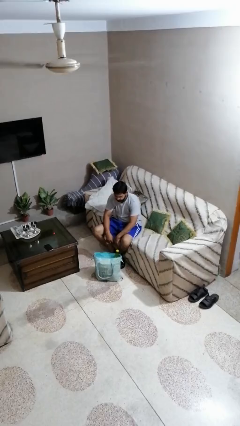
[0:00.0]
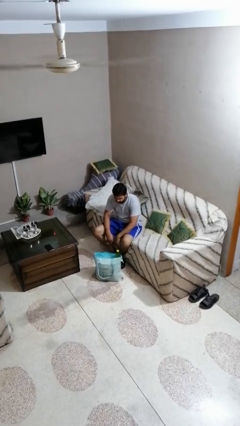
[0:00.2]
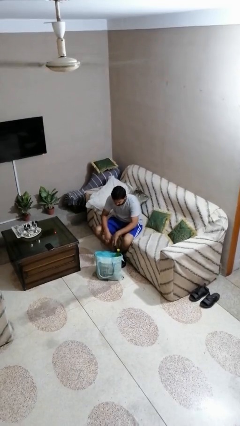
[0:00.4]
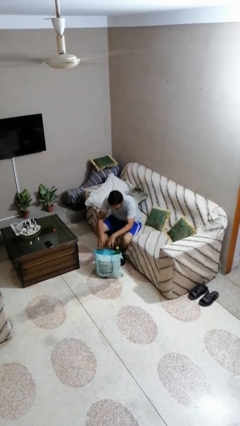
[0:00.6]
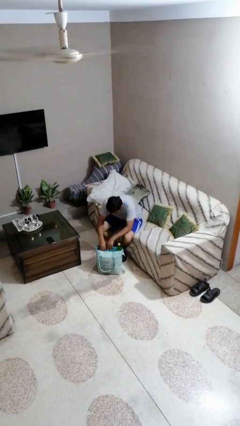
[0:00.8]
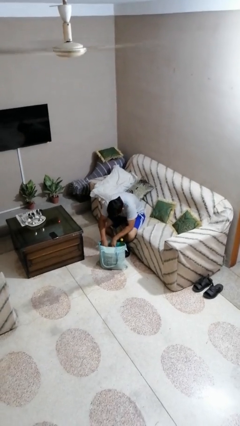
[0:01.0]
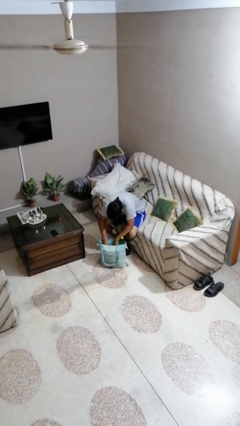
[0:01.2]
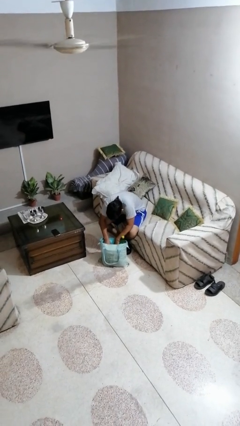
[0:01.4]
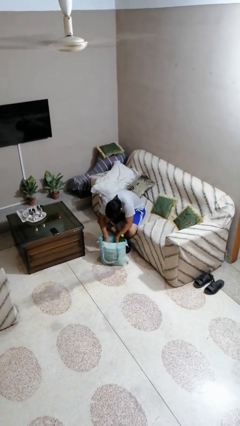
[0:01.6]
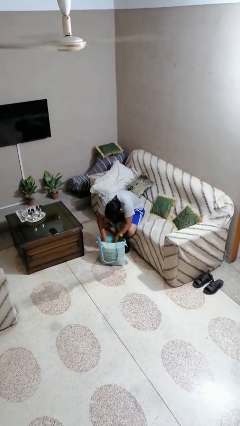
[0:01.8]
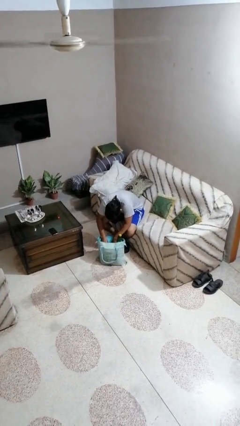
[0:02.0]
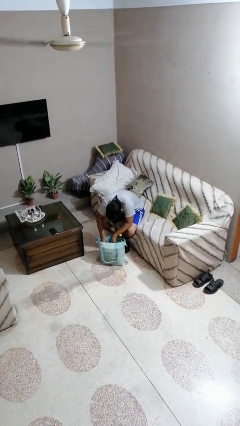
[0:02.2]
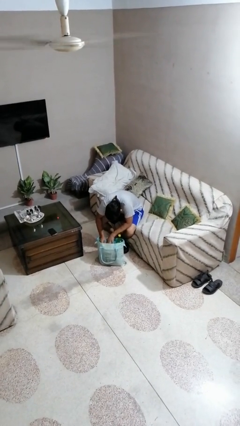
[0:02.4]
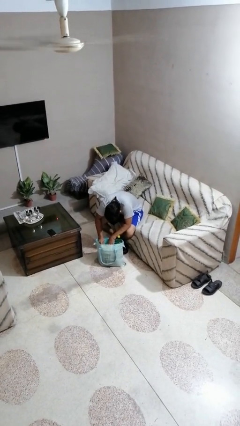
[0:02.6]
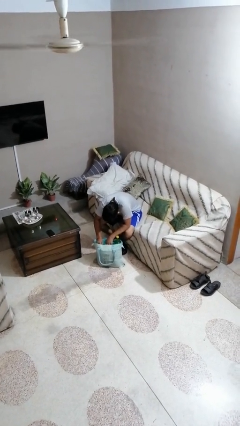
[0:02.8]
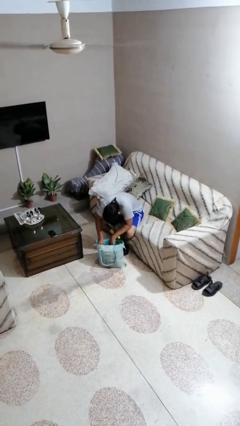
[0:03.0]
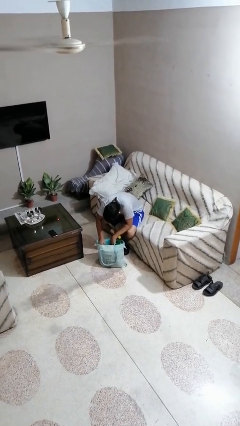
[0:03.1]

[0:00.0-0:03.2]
person searches in bag

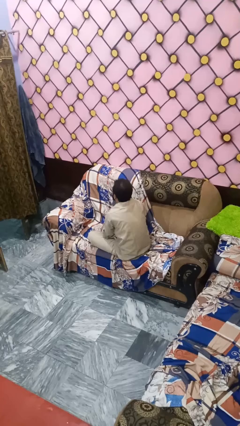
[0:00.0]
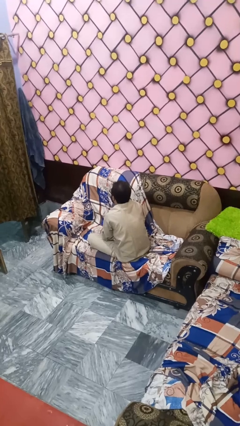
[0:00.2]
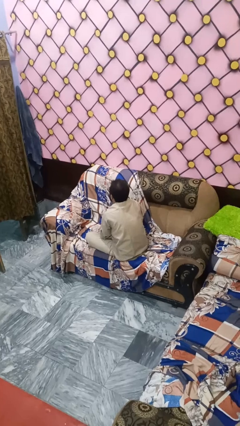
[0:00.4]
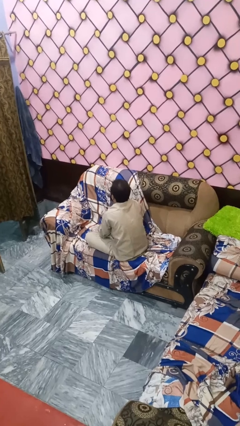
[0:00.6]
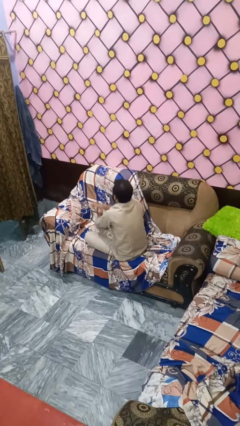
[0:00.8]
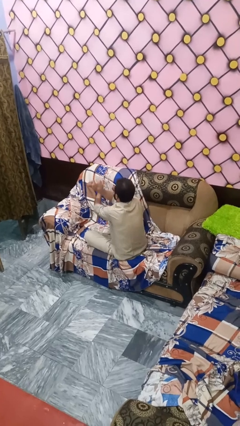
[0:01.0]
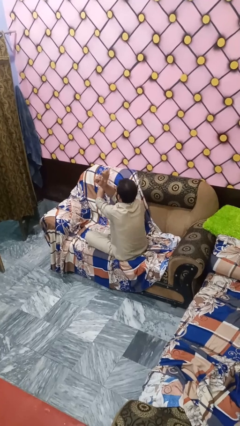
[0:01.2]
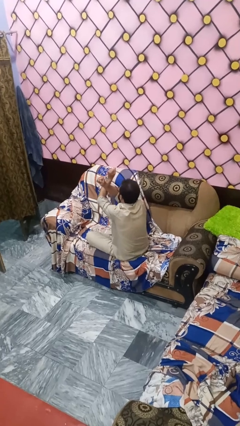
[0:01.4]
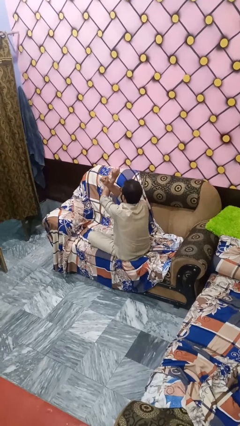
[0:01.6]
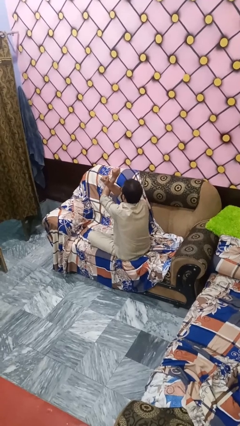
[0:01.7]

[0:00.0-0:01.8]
person gestures arms x

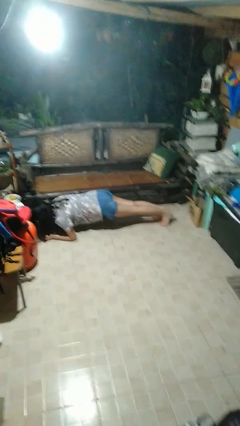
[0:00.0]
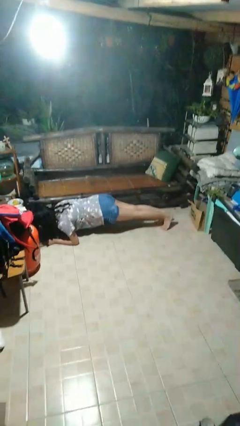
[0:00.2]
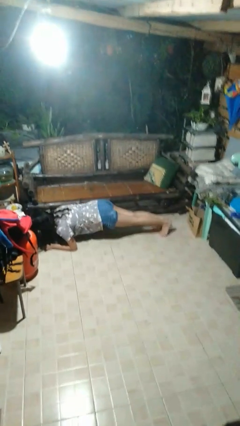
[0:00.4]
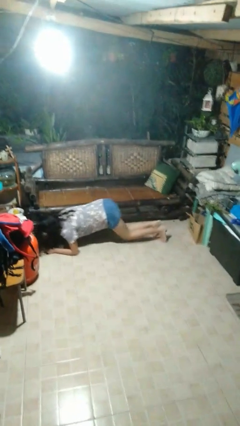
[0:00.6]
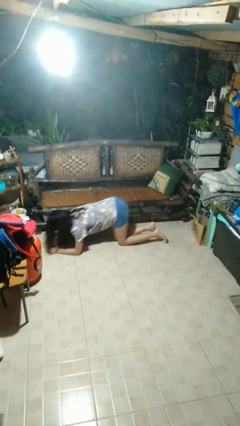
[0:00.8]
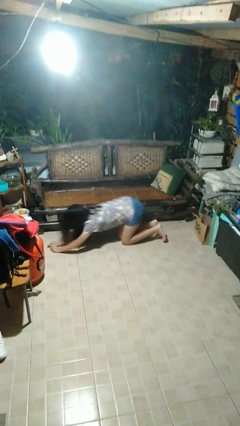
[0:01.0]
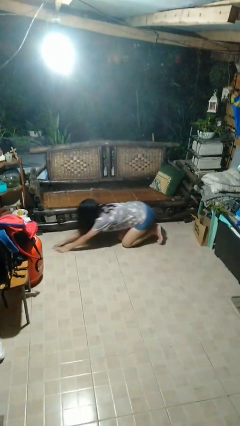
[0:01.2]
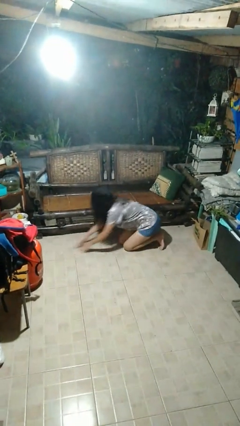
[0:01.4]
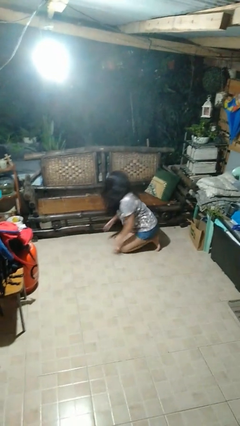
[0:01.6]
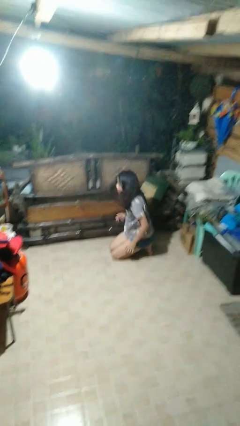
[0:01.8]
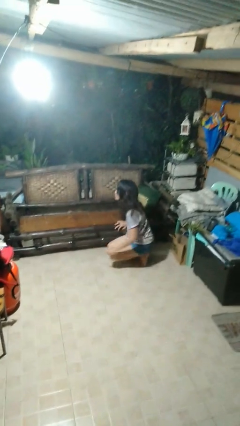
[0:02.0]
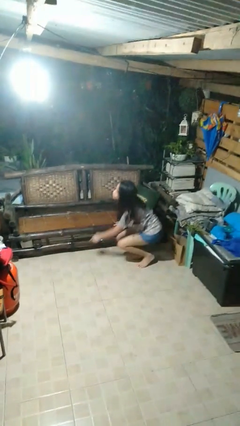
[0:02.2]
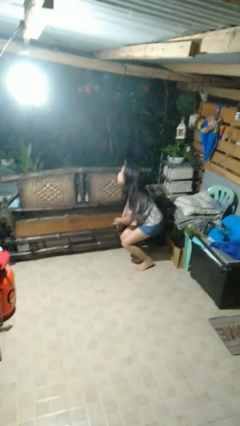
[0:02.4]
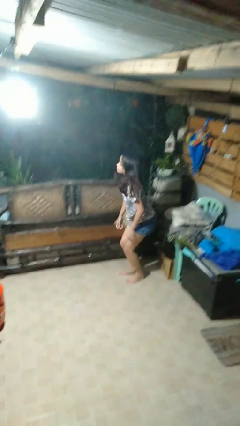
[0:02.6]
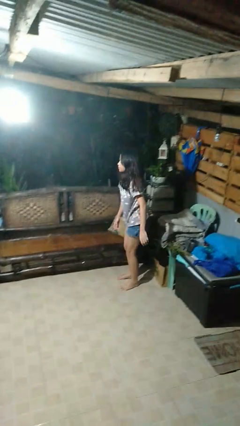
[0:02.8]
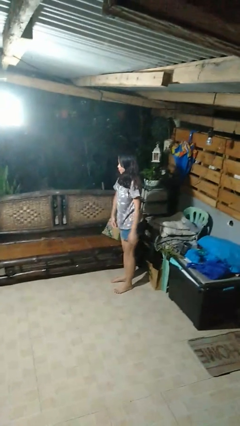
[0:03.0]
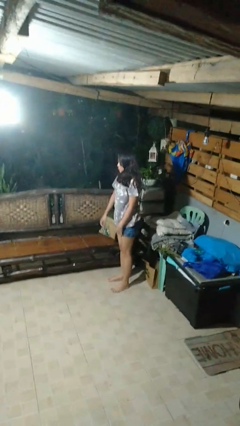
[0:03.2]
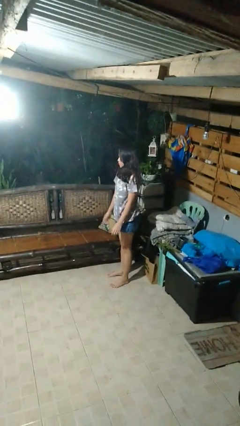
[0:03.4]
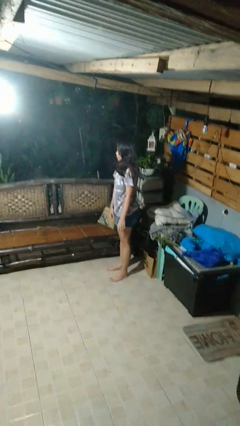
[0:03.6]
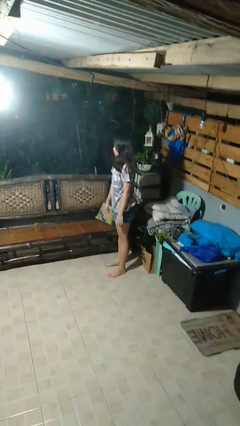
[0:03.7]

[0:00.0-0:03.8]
person stands up from floor

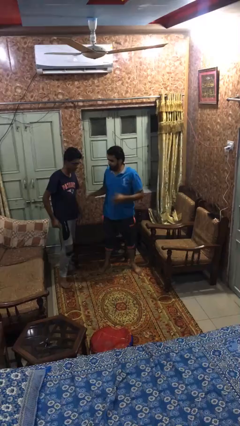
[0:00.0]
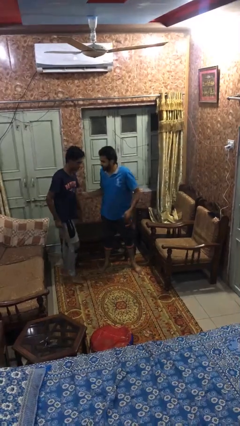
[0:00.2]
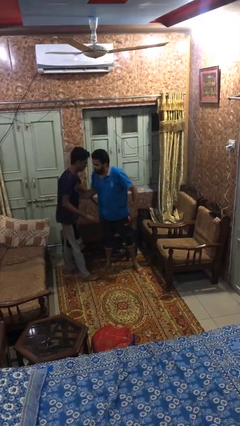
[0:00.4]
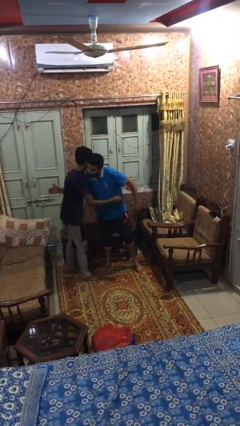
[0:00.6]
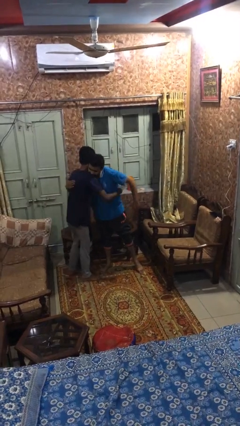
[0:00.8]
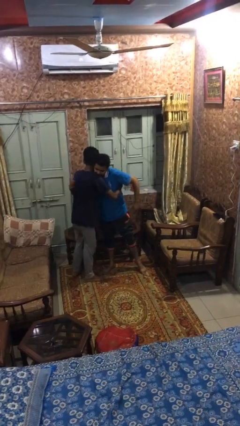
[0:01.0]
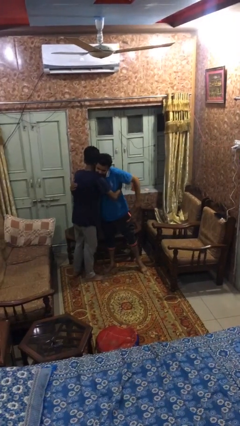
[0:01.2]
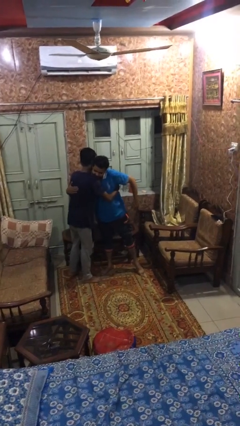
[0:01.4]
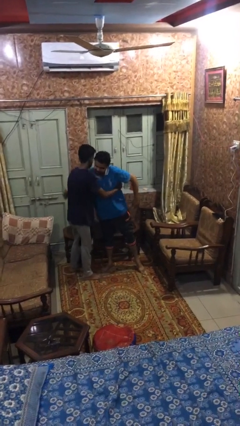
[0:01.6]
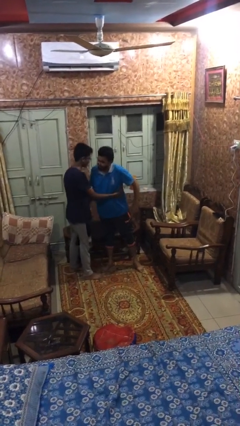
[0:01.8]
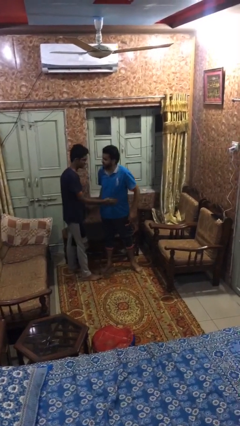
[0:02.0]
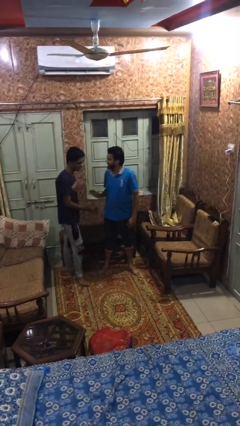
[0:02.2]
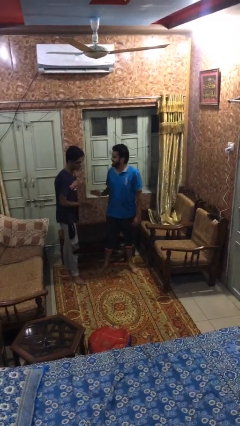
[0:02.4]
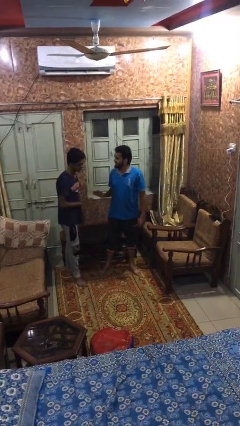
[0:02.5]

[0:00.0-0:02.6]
person embraces person

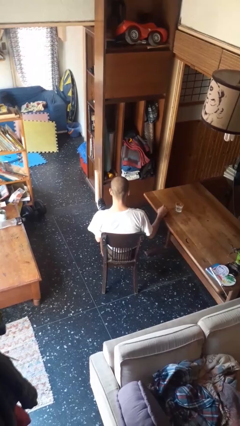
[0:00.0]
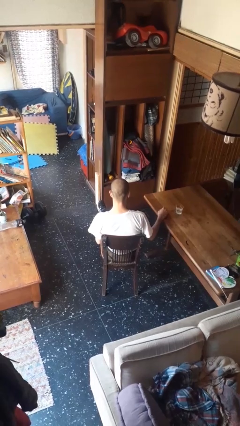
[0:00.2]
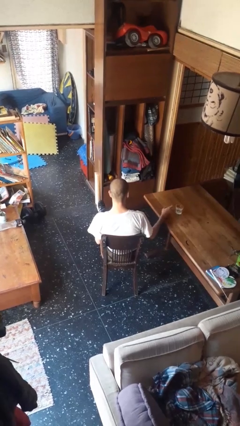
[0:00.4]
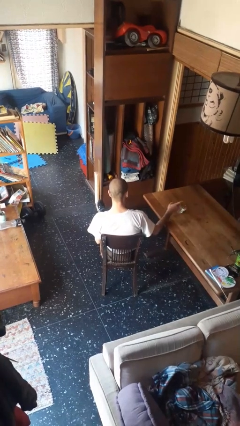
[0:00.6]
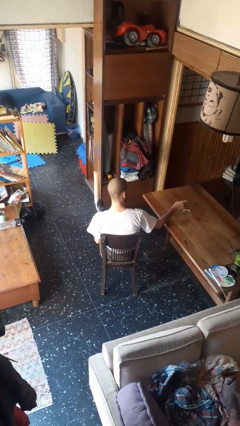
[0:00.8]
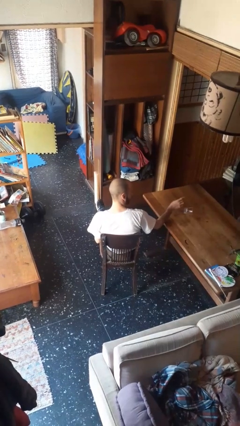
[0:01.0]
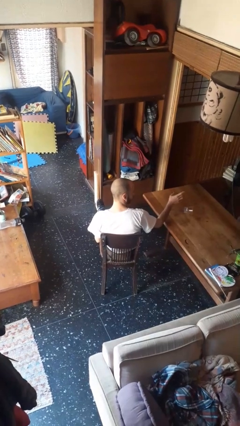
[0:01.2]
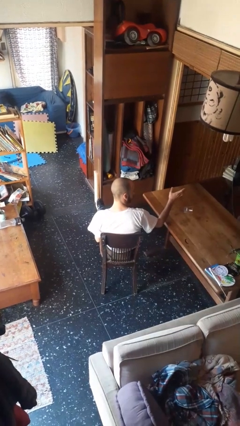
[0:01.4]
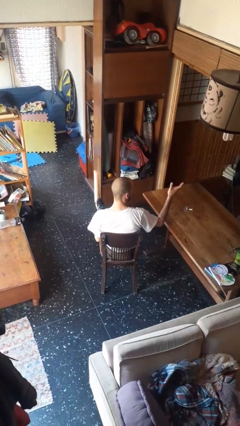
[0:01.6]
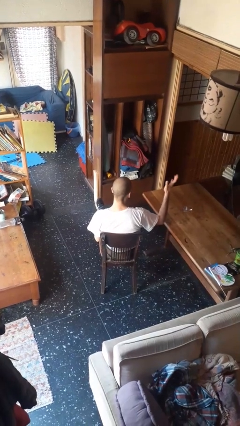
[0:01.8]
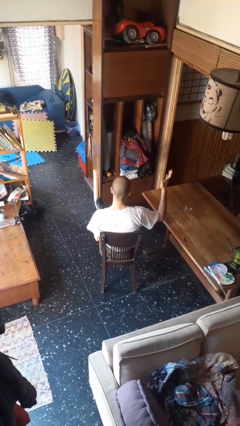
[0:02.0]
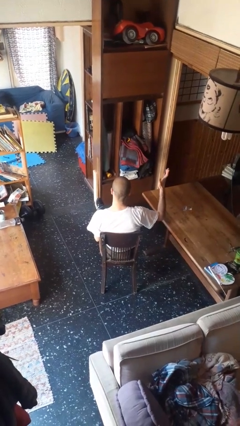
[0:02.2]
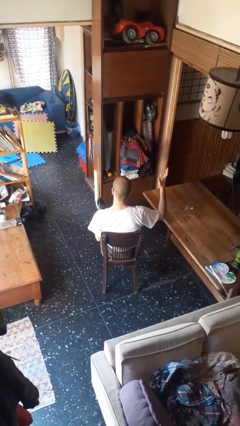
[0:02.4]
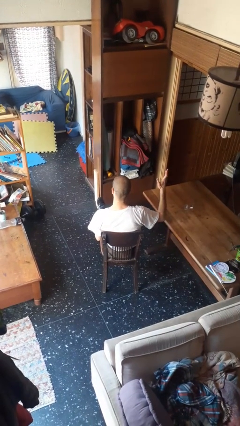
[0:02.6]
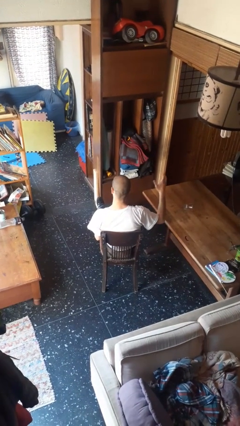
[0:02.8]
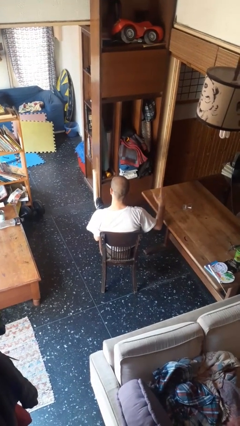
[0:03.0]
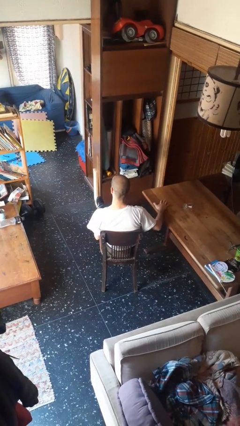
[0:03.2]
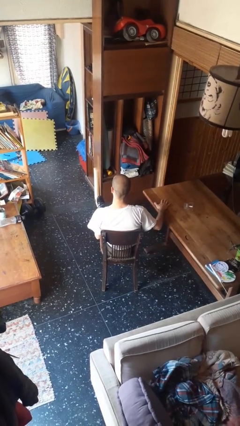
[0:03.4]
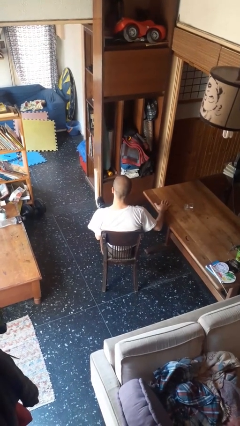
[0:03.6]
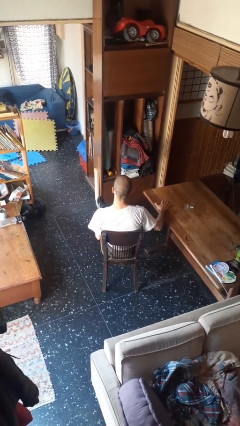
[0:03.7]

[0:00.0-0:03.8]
person spills on table

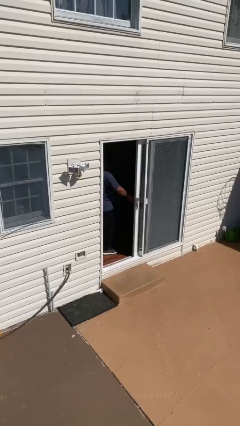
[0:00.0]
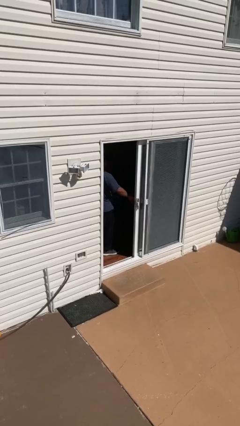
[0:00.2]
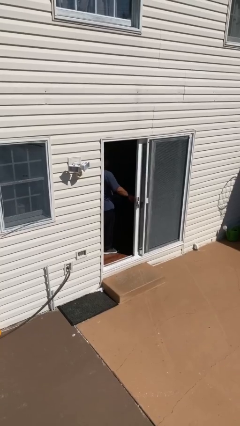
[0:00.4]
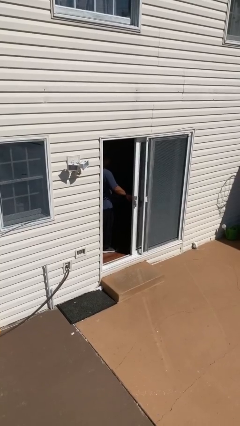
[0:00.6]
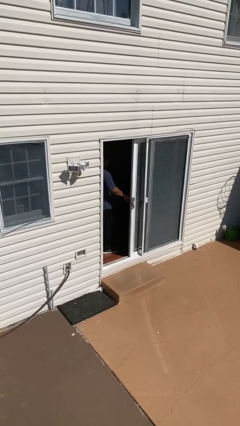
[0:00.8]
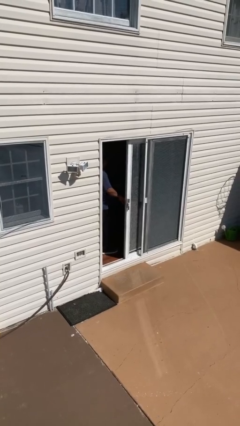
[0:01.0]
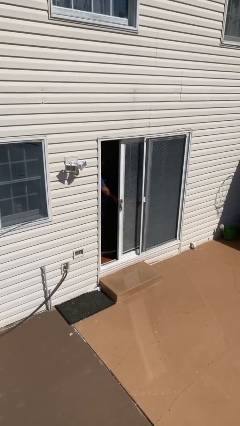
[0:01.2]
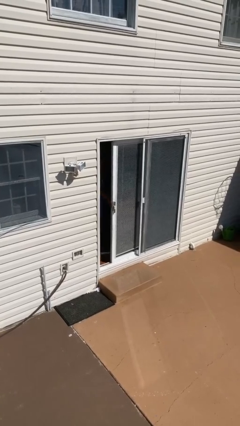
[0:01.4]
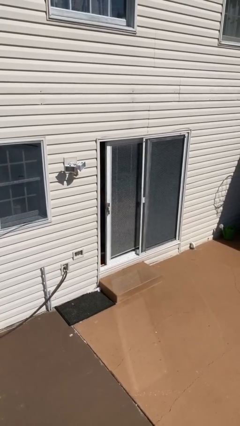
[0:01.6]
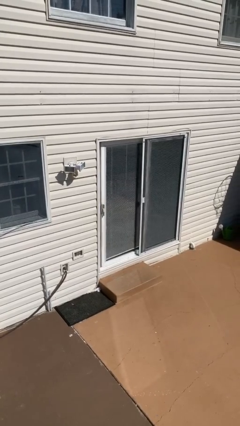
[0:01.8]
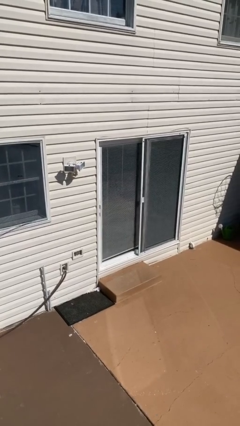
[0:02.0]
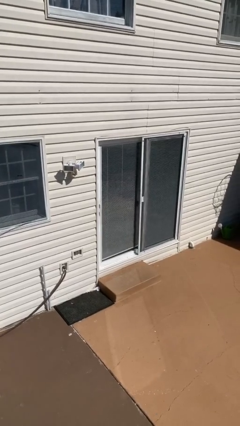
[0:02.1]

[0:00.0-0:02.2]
person closes facility door
